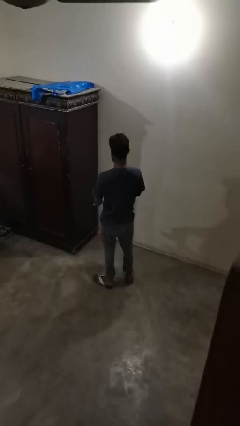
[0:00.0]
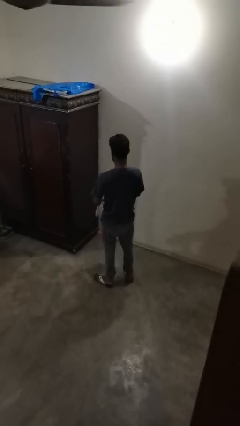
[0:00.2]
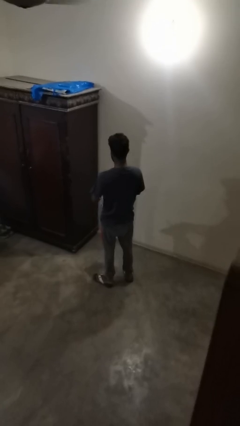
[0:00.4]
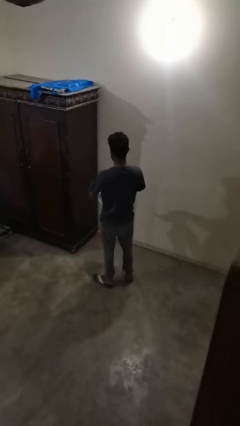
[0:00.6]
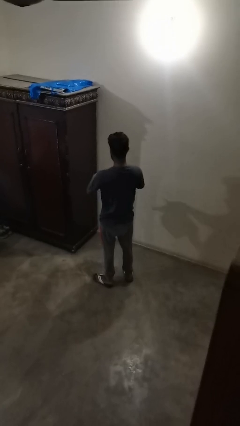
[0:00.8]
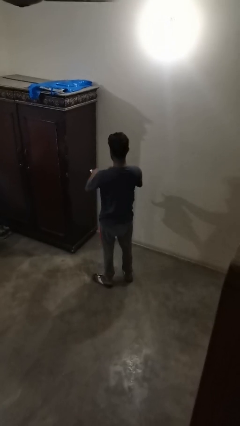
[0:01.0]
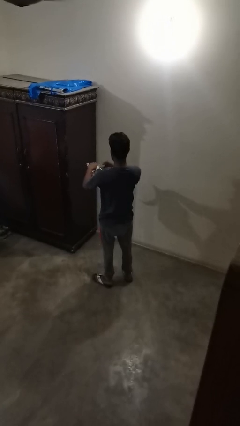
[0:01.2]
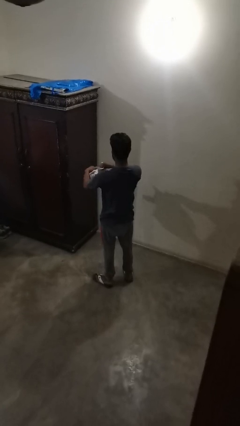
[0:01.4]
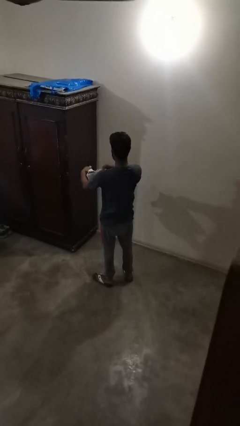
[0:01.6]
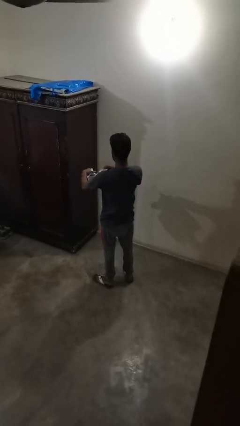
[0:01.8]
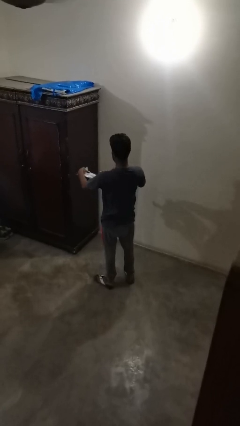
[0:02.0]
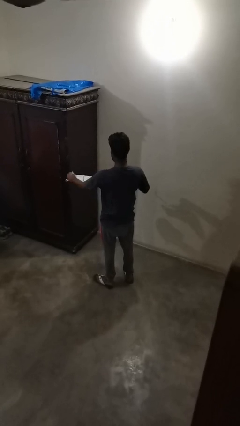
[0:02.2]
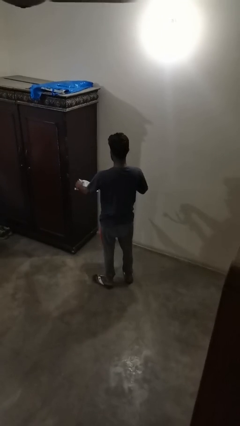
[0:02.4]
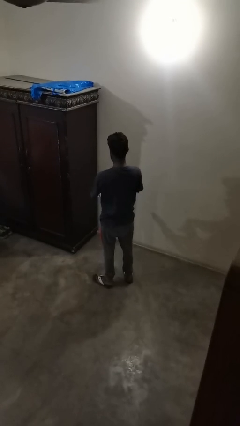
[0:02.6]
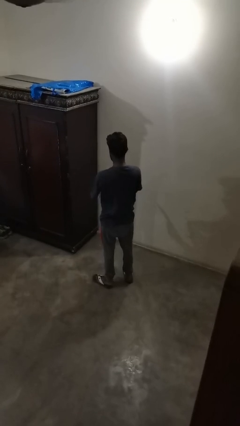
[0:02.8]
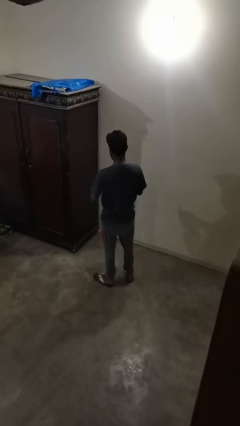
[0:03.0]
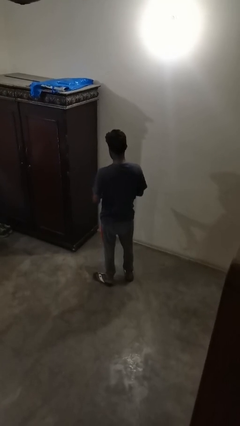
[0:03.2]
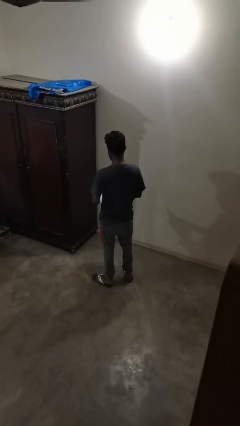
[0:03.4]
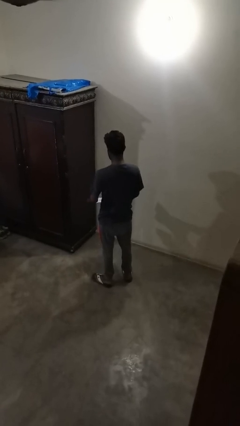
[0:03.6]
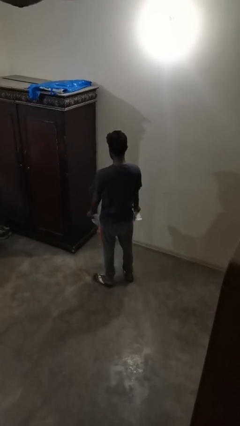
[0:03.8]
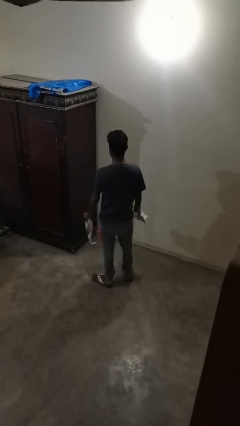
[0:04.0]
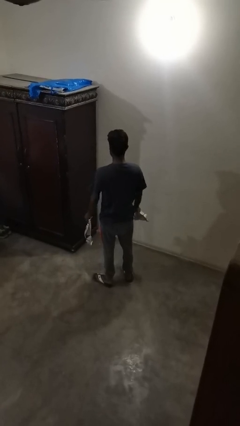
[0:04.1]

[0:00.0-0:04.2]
person tears paper

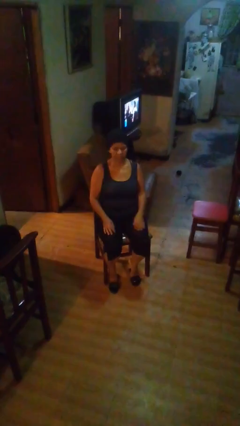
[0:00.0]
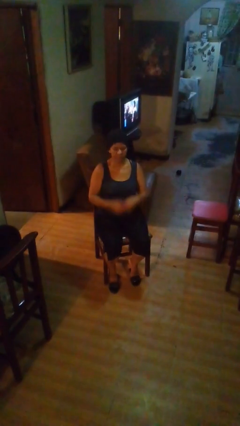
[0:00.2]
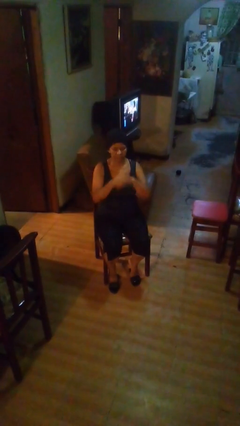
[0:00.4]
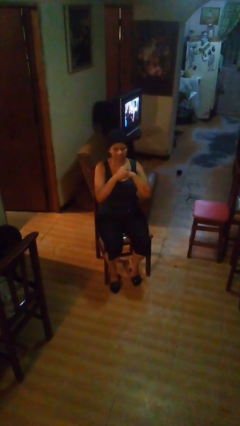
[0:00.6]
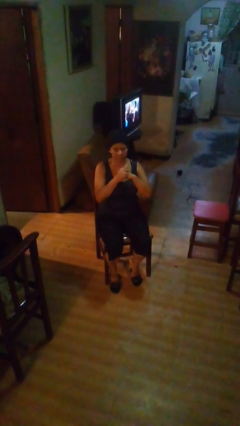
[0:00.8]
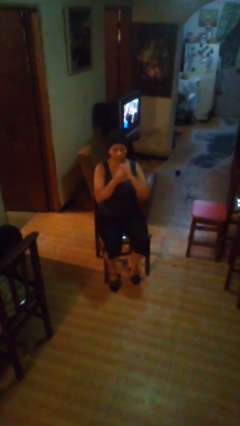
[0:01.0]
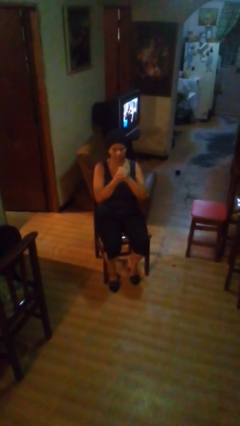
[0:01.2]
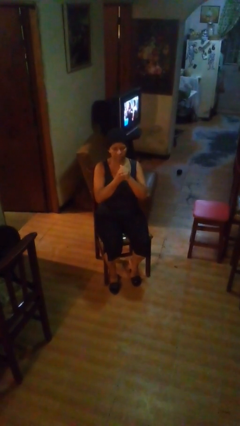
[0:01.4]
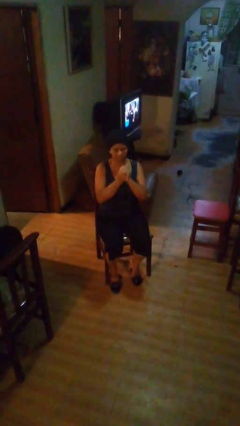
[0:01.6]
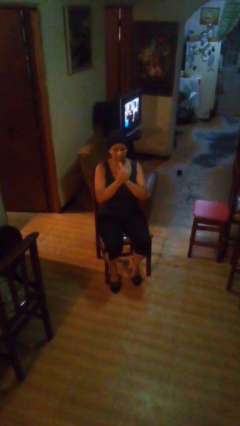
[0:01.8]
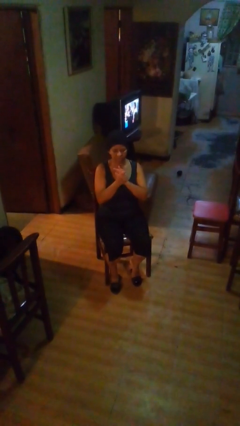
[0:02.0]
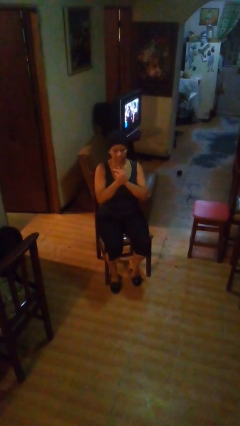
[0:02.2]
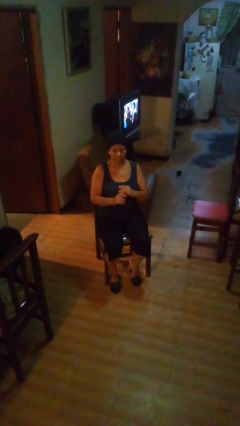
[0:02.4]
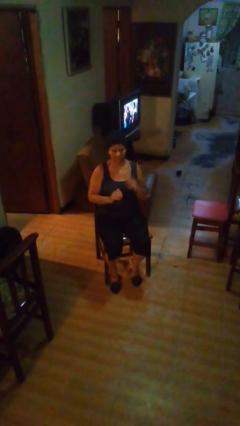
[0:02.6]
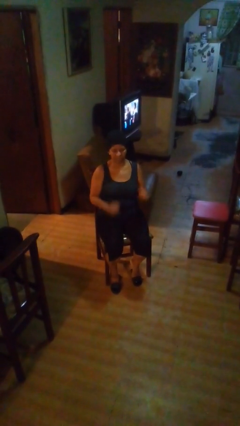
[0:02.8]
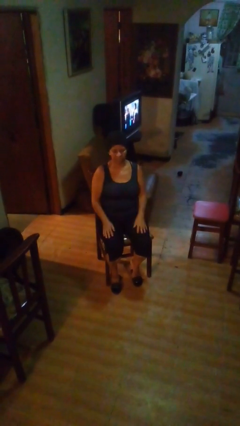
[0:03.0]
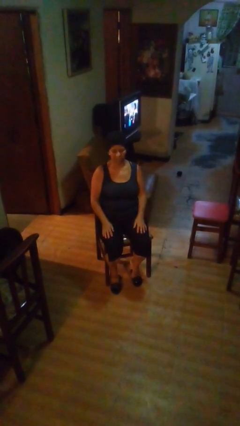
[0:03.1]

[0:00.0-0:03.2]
person cracks knuckles

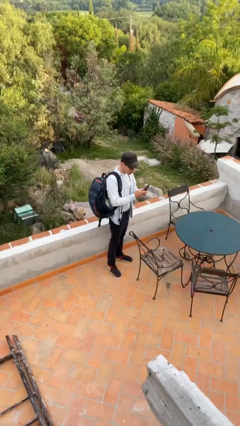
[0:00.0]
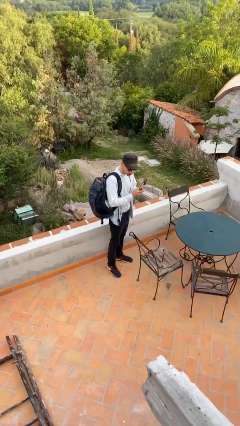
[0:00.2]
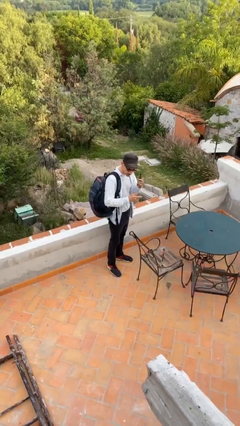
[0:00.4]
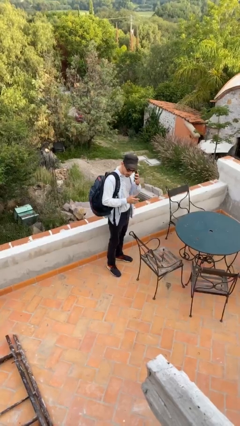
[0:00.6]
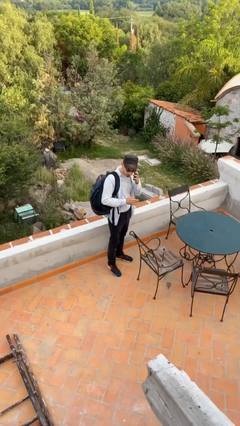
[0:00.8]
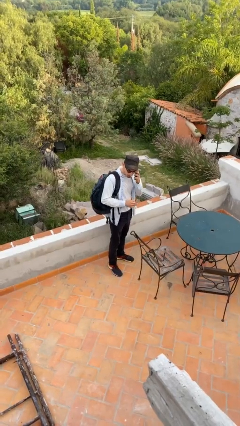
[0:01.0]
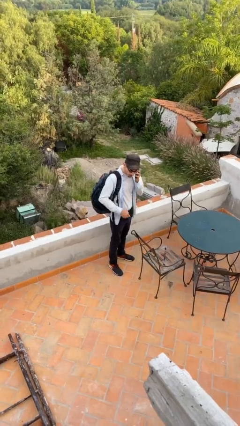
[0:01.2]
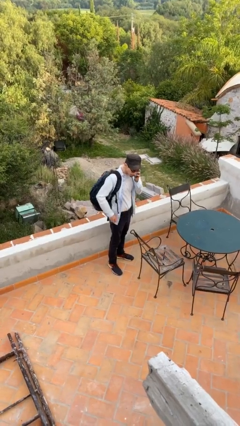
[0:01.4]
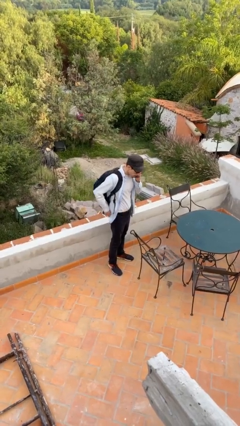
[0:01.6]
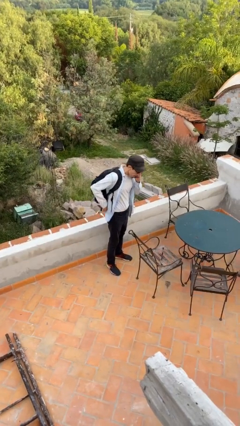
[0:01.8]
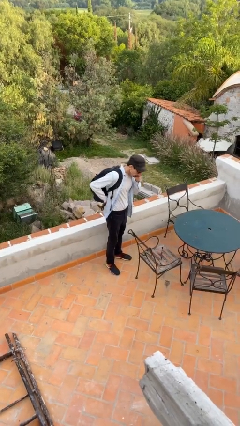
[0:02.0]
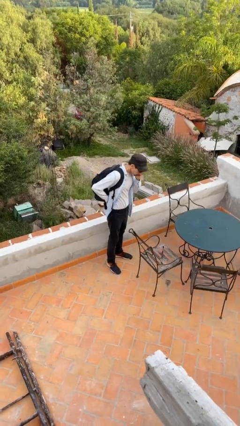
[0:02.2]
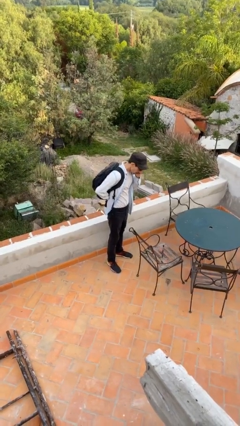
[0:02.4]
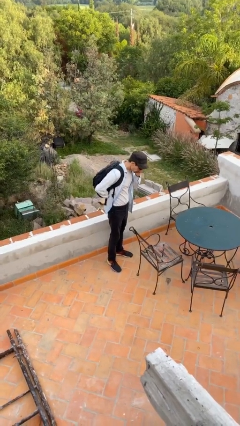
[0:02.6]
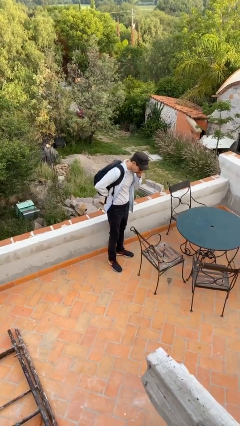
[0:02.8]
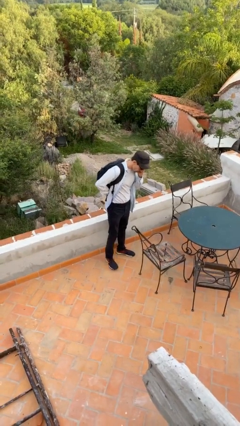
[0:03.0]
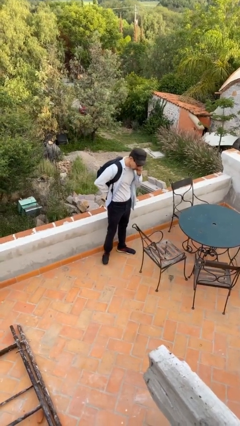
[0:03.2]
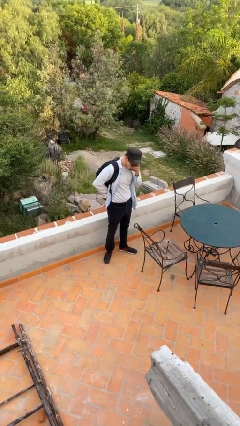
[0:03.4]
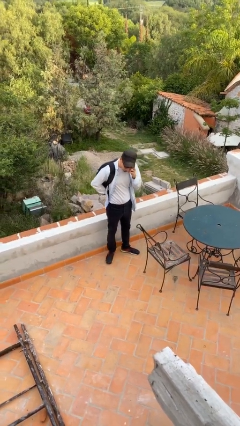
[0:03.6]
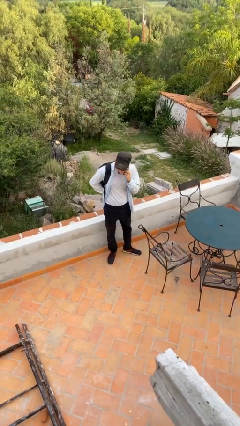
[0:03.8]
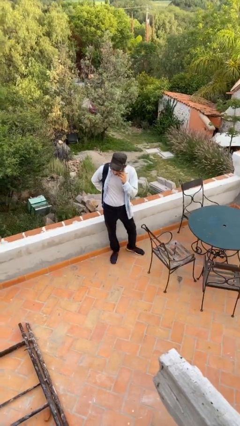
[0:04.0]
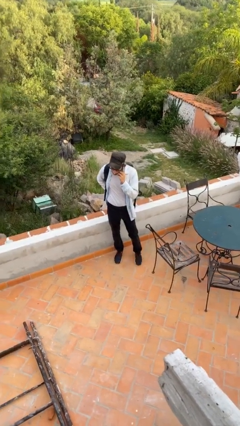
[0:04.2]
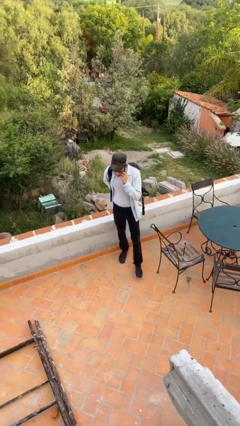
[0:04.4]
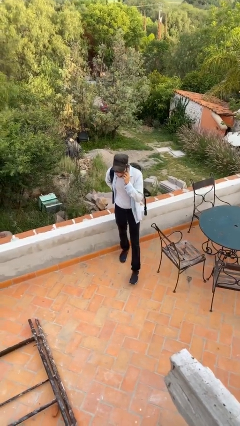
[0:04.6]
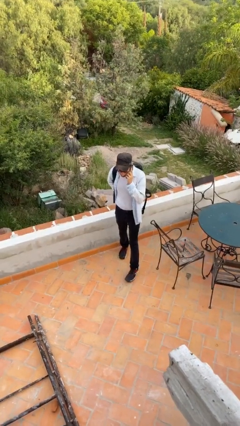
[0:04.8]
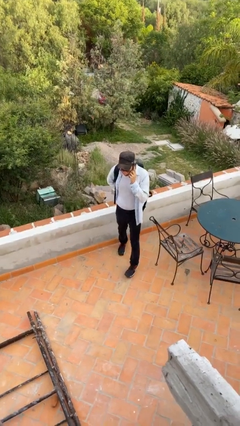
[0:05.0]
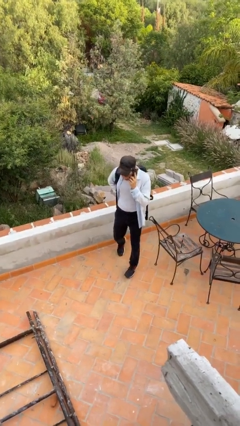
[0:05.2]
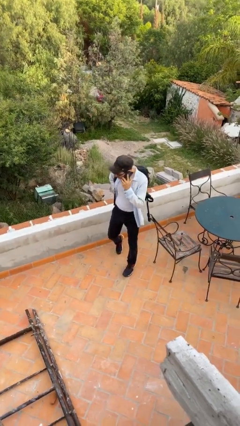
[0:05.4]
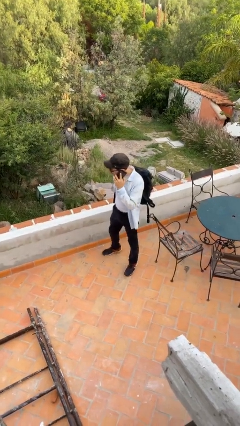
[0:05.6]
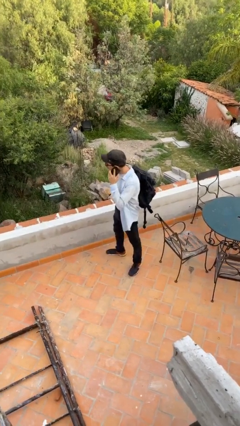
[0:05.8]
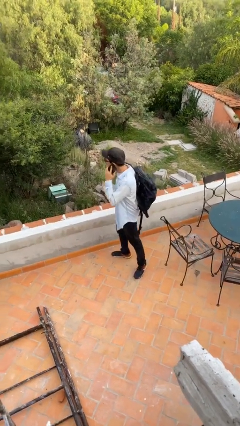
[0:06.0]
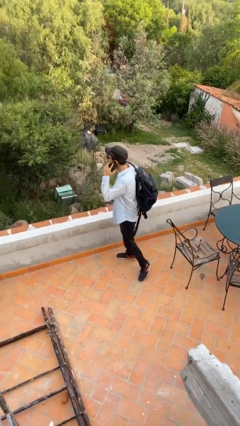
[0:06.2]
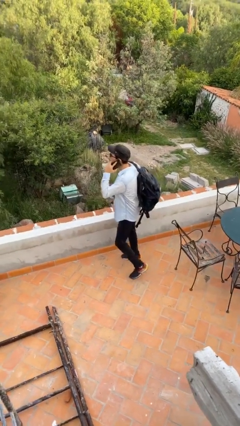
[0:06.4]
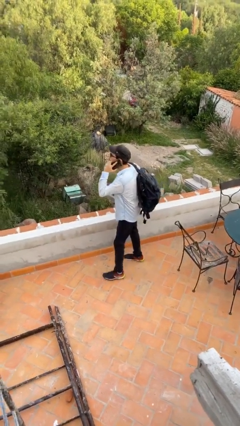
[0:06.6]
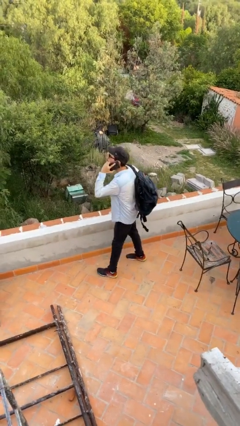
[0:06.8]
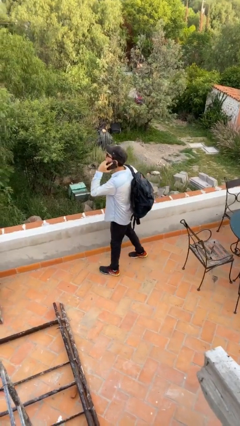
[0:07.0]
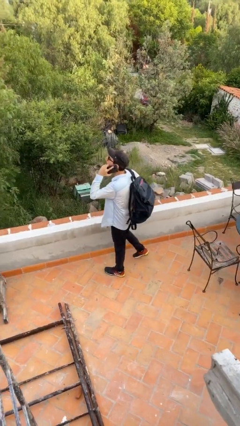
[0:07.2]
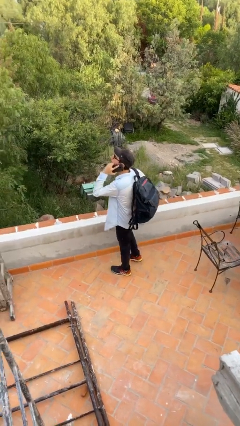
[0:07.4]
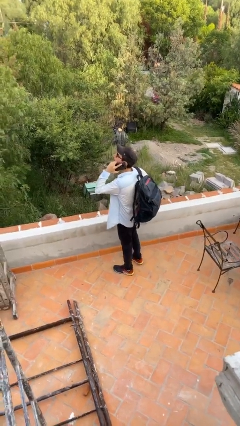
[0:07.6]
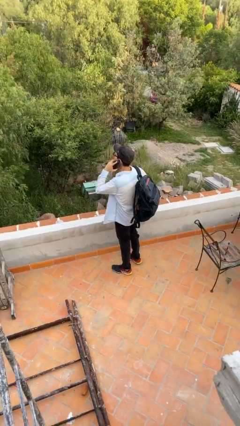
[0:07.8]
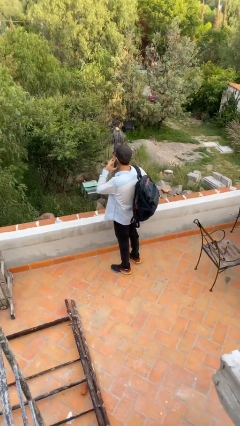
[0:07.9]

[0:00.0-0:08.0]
person talks on phone

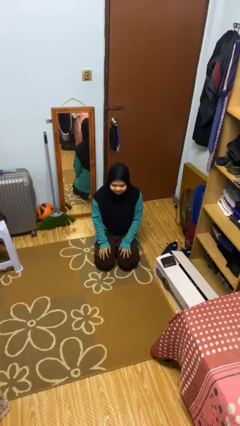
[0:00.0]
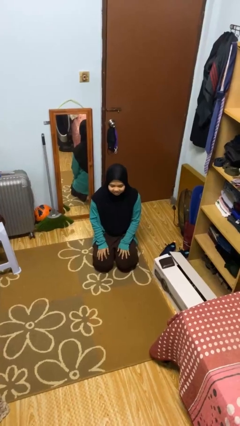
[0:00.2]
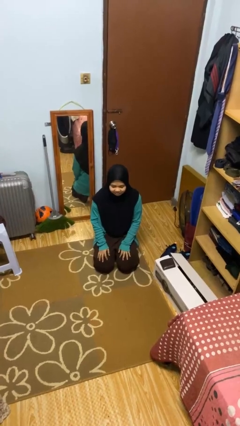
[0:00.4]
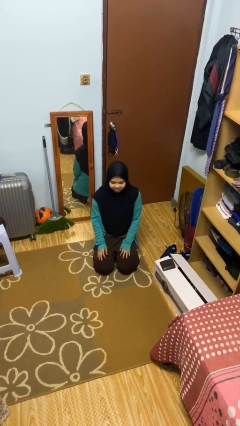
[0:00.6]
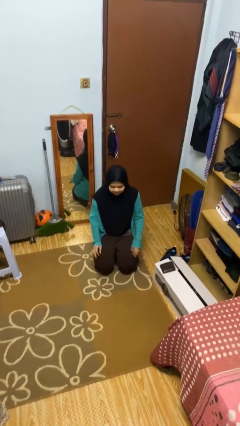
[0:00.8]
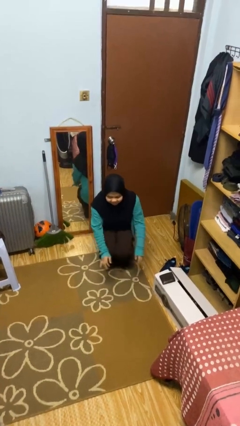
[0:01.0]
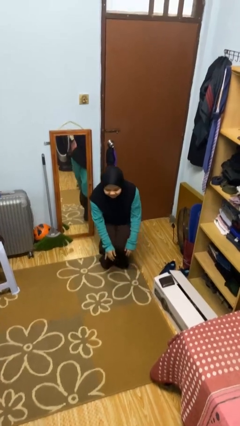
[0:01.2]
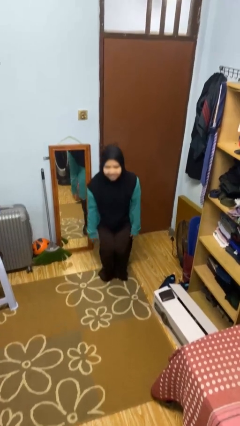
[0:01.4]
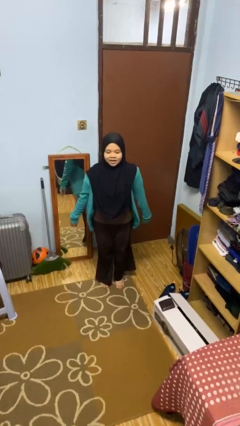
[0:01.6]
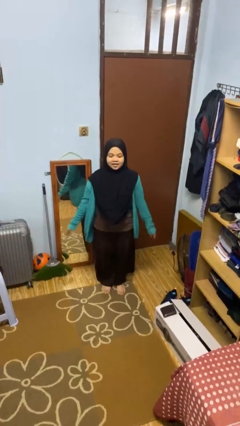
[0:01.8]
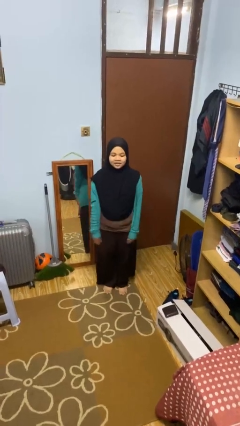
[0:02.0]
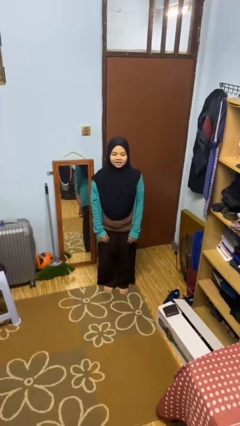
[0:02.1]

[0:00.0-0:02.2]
person stands up from floor

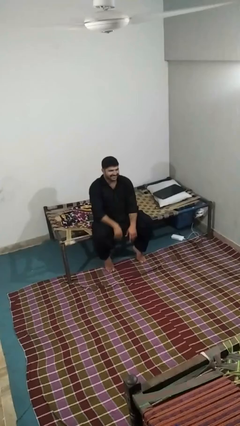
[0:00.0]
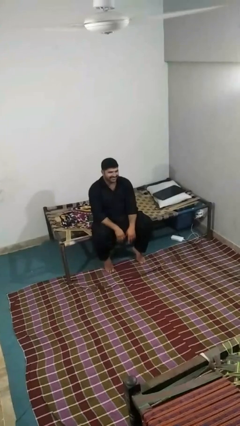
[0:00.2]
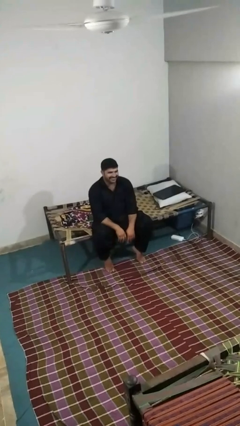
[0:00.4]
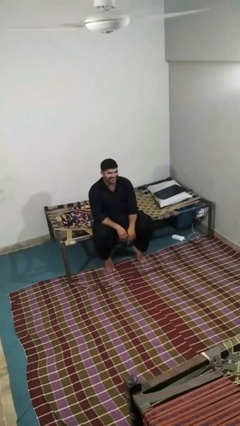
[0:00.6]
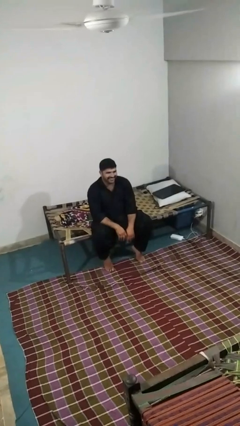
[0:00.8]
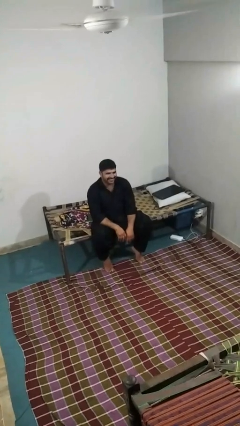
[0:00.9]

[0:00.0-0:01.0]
person gestures lower hand
